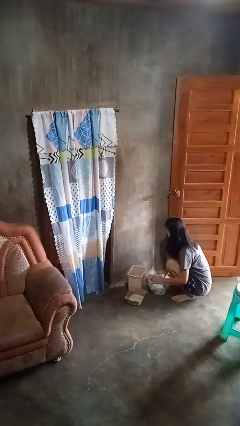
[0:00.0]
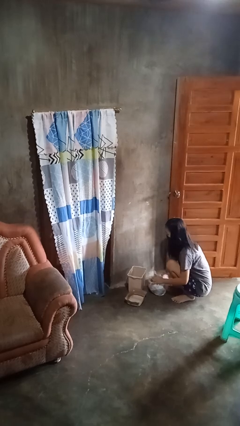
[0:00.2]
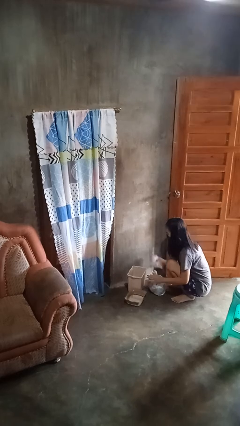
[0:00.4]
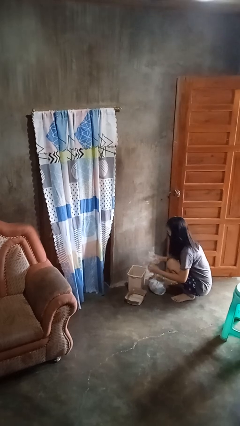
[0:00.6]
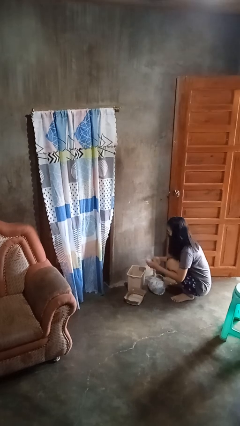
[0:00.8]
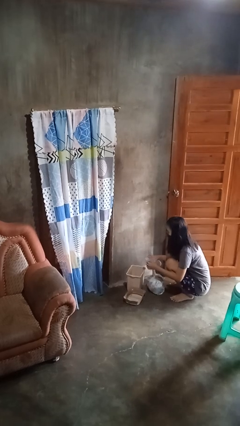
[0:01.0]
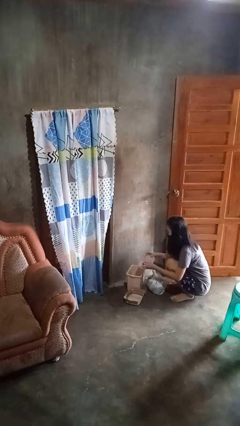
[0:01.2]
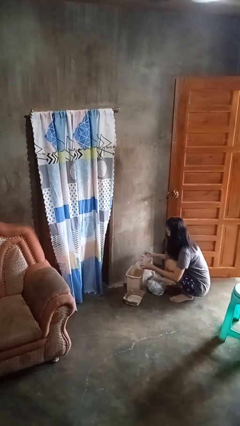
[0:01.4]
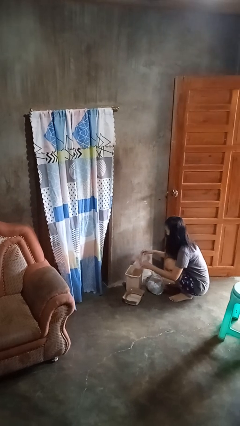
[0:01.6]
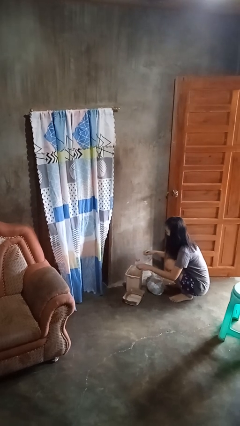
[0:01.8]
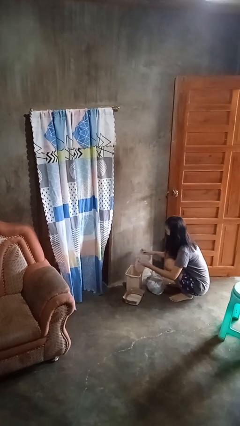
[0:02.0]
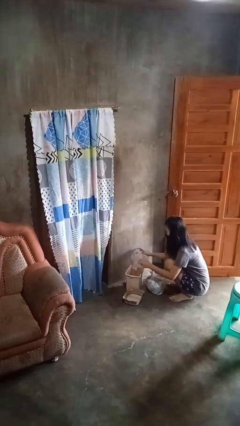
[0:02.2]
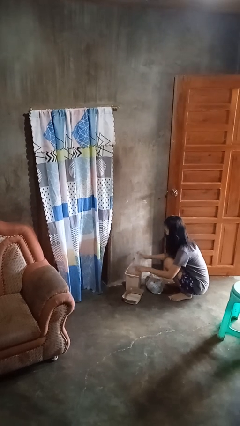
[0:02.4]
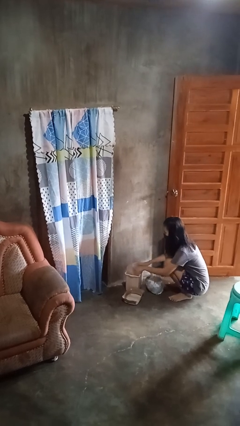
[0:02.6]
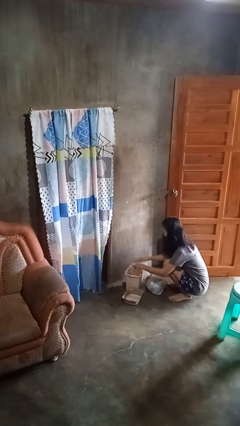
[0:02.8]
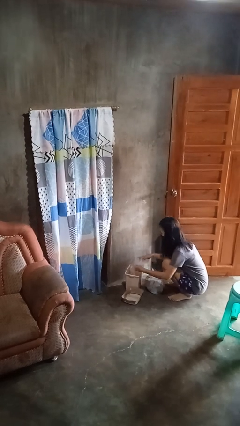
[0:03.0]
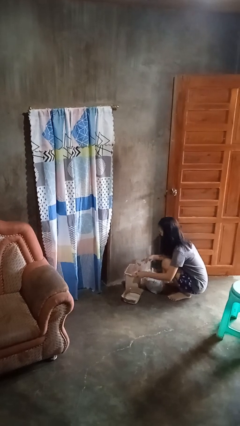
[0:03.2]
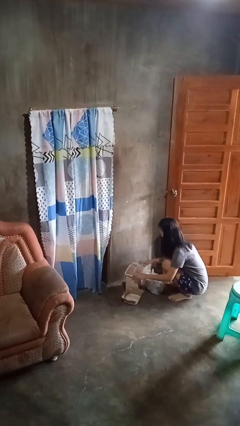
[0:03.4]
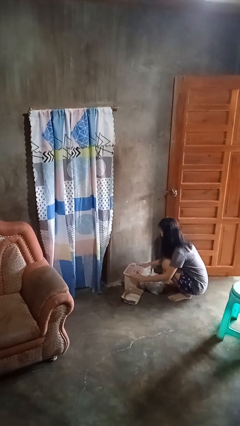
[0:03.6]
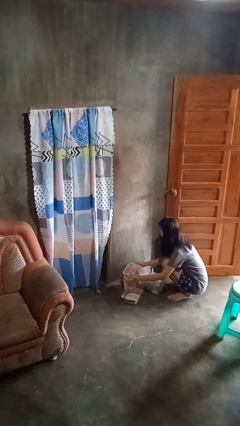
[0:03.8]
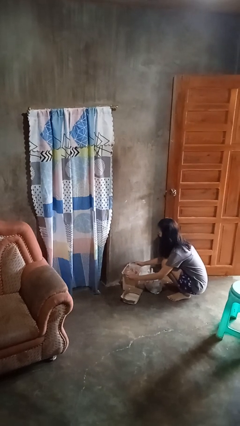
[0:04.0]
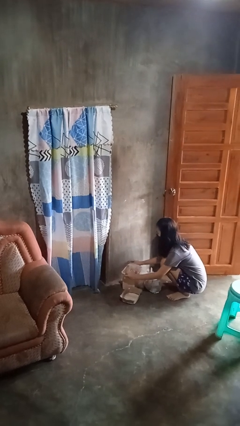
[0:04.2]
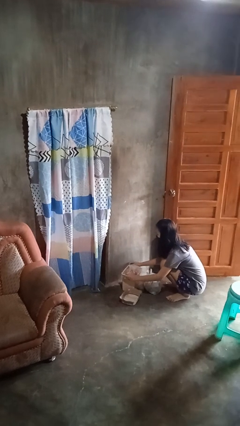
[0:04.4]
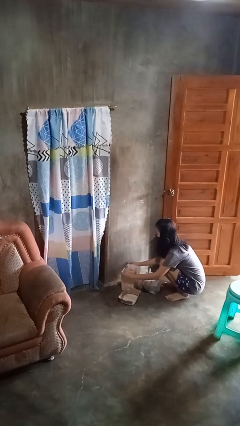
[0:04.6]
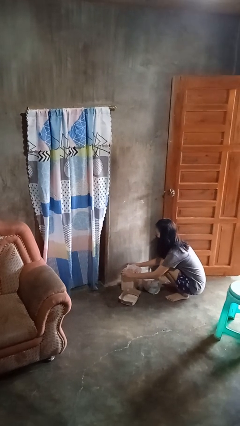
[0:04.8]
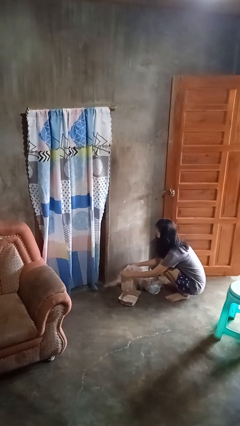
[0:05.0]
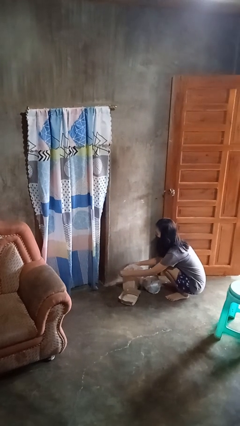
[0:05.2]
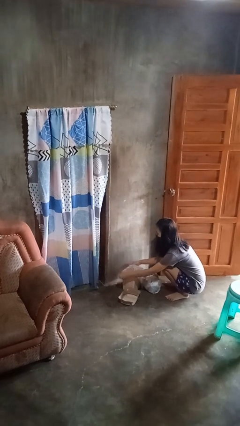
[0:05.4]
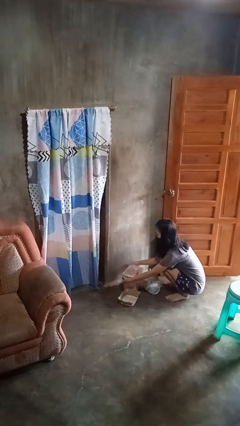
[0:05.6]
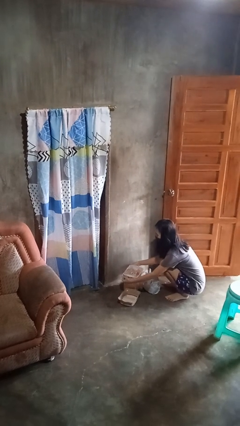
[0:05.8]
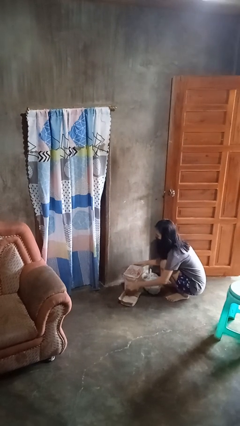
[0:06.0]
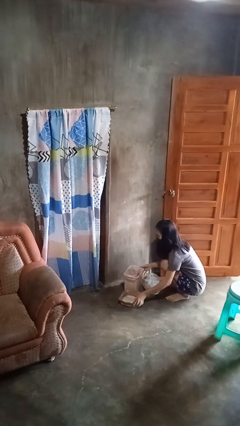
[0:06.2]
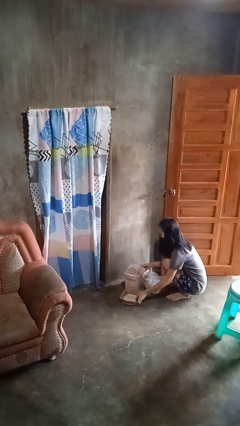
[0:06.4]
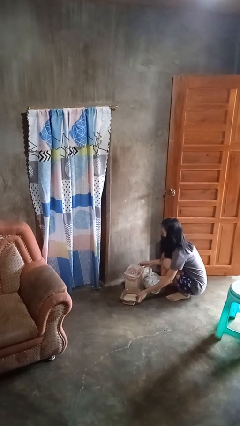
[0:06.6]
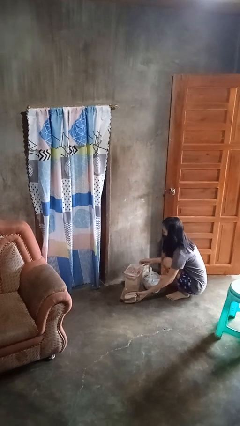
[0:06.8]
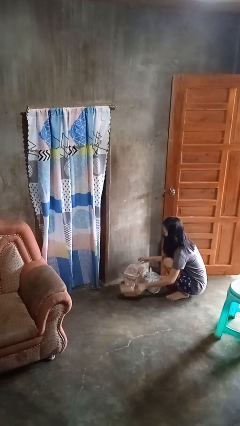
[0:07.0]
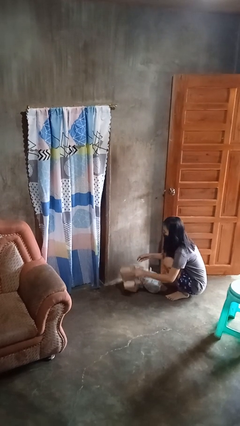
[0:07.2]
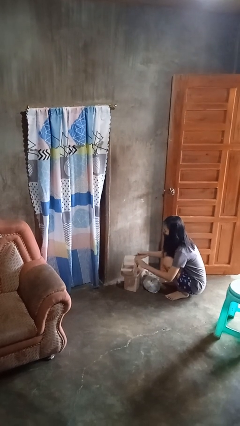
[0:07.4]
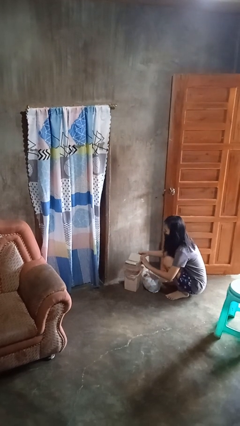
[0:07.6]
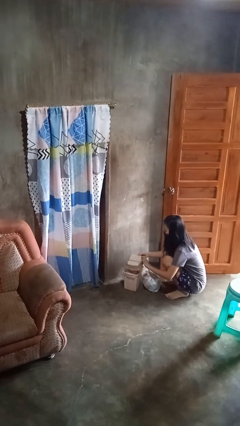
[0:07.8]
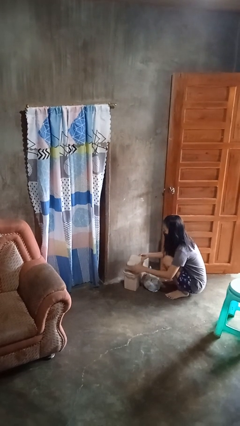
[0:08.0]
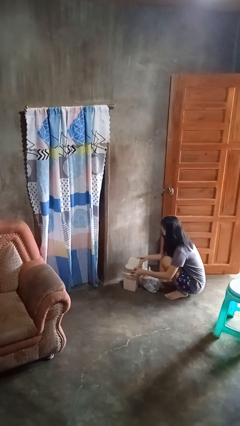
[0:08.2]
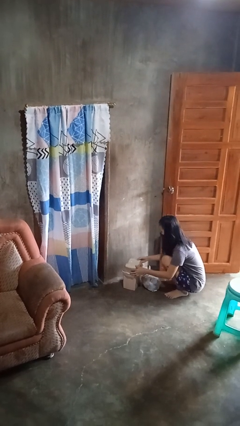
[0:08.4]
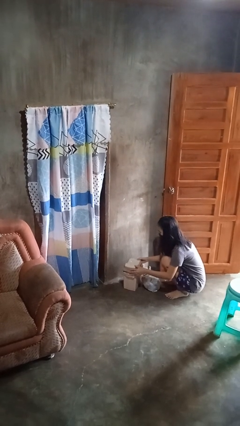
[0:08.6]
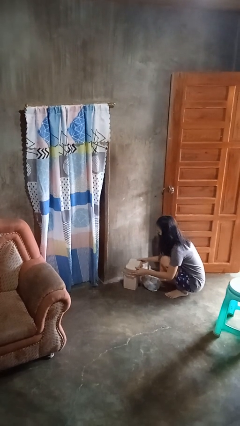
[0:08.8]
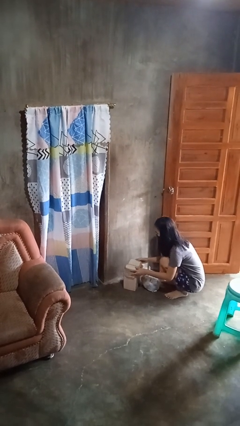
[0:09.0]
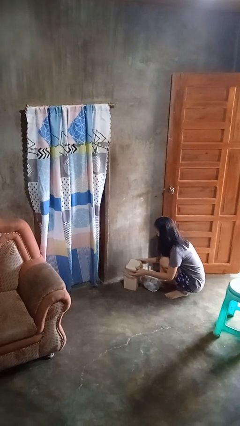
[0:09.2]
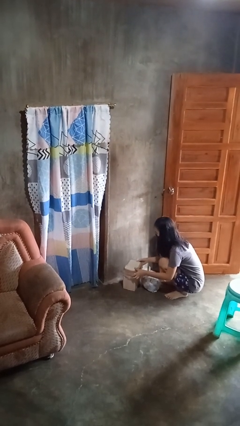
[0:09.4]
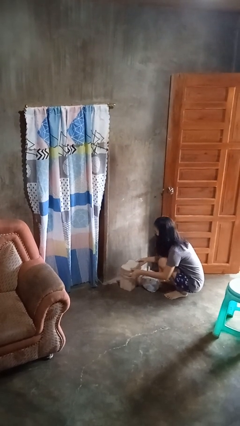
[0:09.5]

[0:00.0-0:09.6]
person inserts trashbag into trashcan

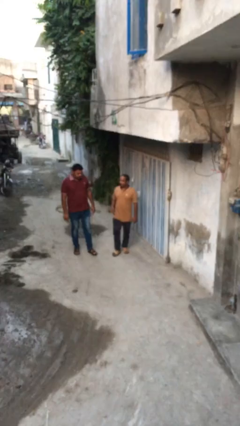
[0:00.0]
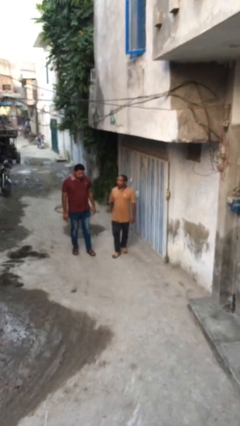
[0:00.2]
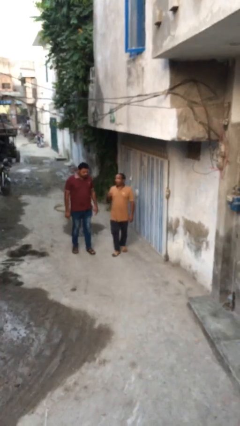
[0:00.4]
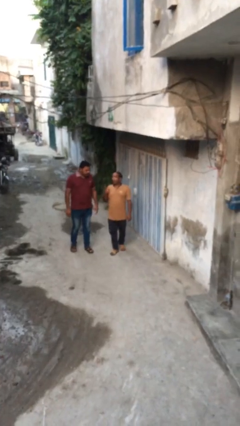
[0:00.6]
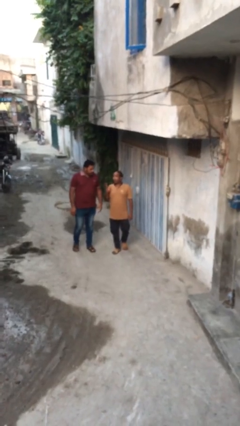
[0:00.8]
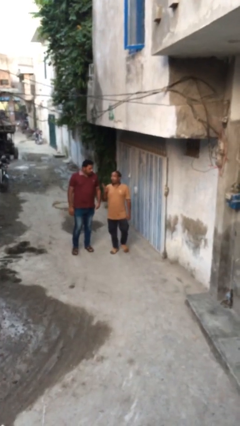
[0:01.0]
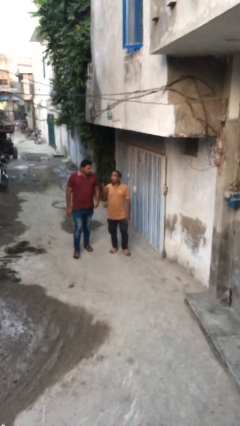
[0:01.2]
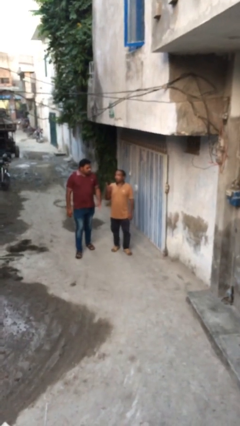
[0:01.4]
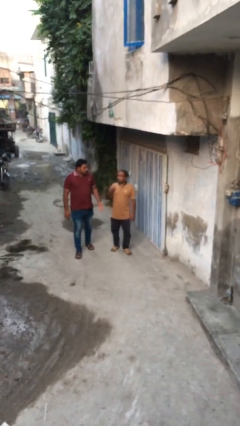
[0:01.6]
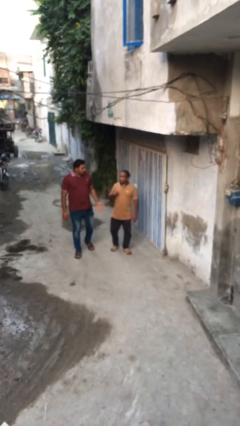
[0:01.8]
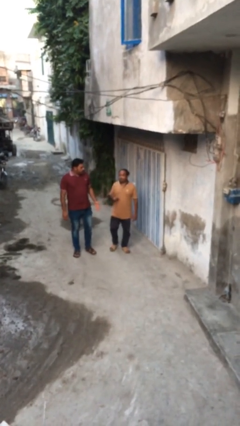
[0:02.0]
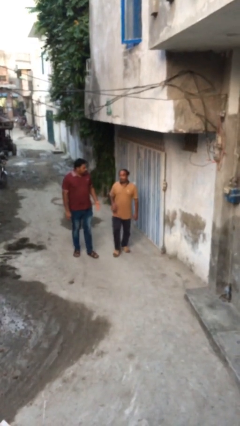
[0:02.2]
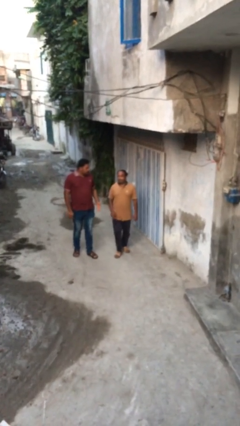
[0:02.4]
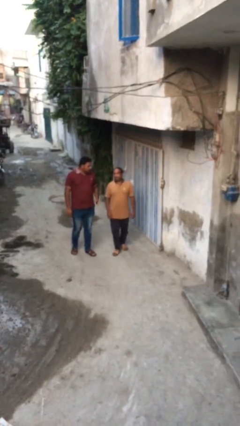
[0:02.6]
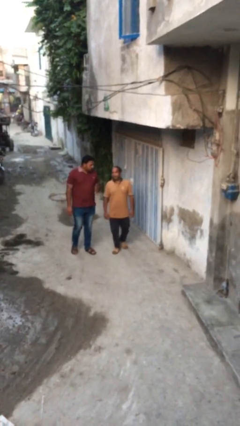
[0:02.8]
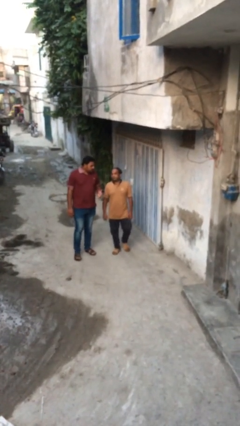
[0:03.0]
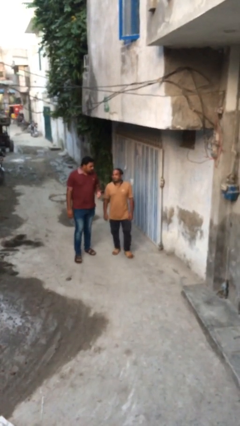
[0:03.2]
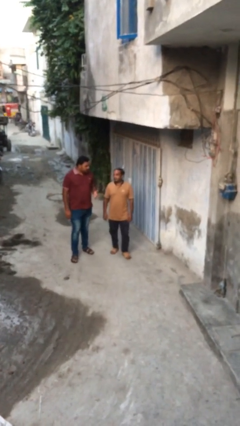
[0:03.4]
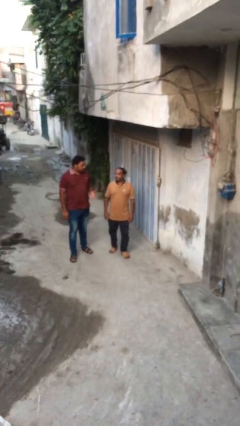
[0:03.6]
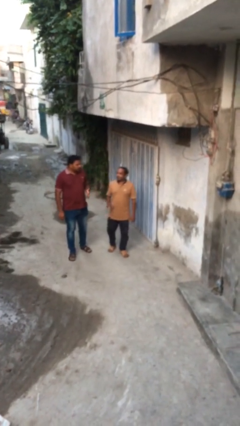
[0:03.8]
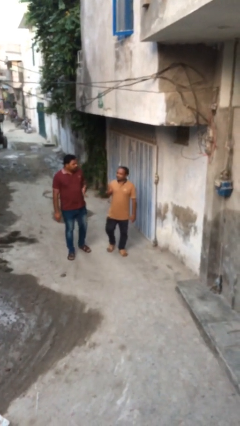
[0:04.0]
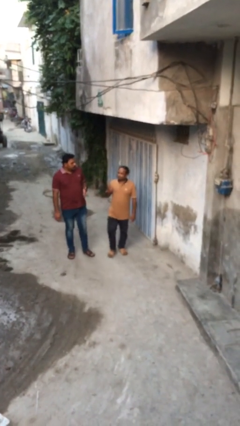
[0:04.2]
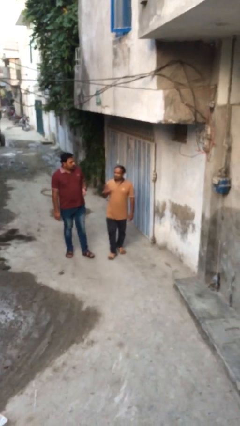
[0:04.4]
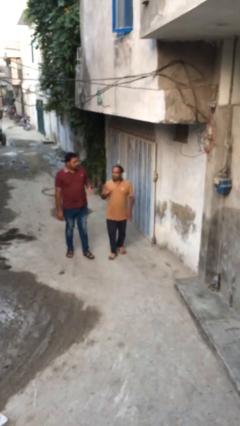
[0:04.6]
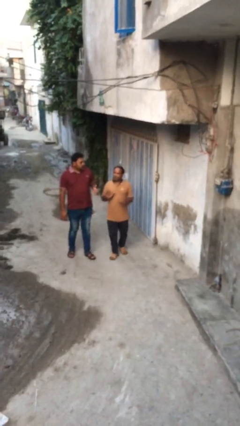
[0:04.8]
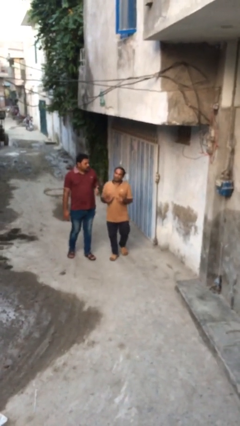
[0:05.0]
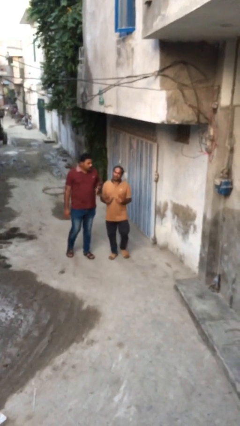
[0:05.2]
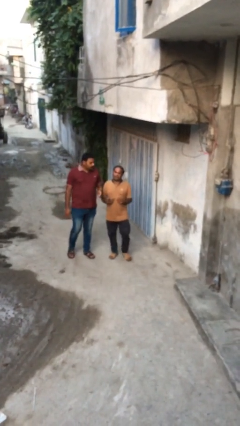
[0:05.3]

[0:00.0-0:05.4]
person talks to person

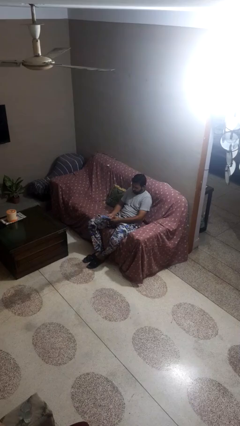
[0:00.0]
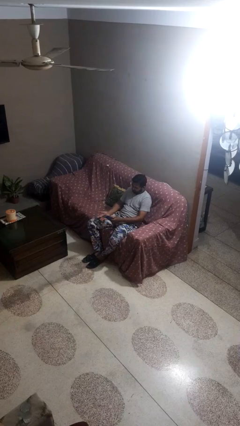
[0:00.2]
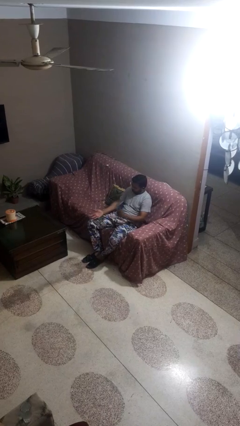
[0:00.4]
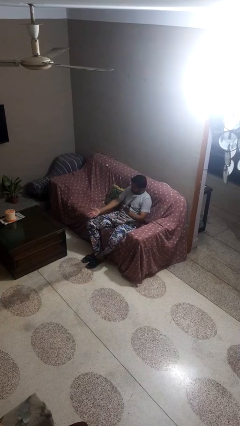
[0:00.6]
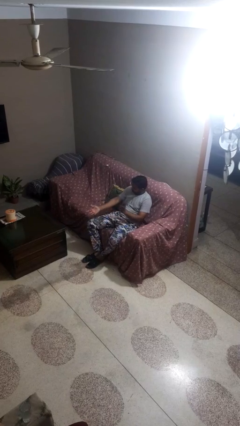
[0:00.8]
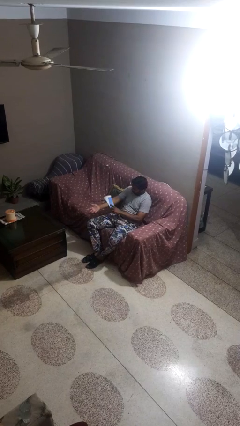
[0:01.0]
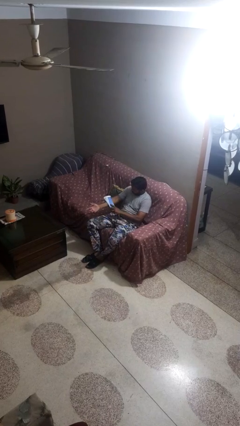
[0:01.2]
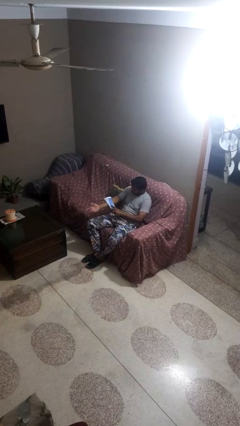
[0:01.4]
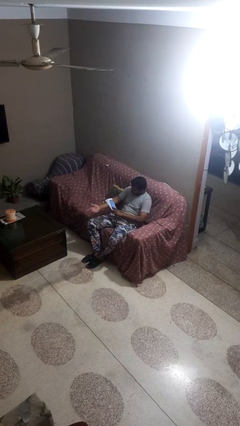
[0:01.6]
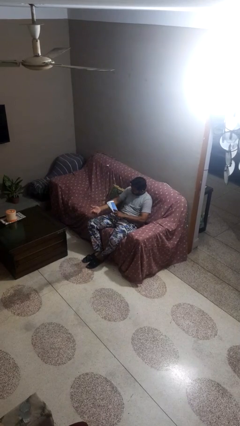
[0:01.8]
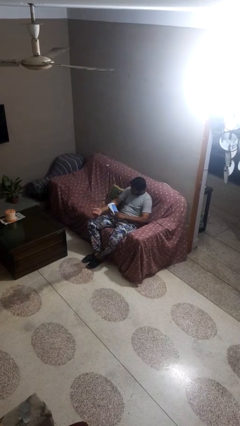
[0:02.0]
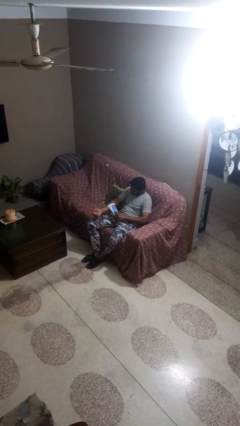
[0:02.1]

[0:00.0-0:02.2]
person swats bug

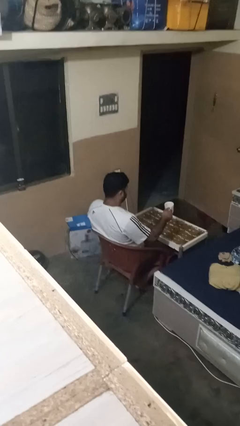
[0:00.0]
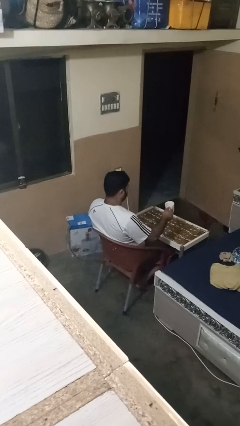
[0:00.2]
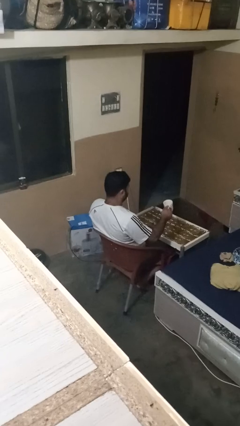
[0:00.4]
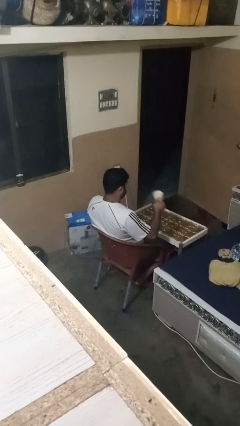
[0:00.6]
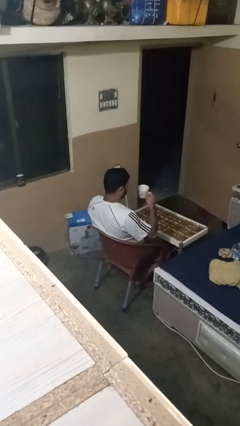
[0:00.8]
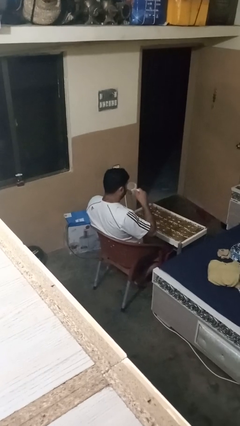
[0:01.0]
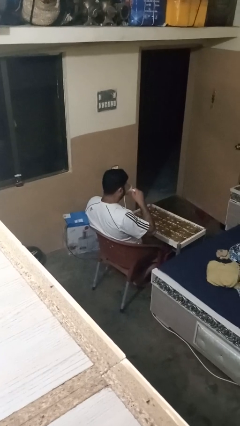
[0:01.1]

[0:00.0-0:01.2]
person drinks from mug
